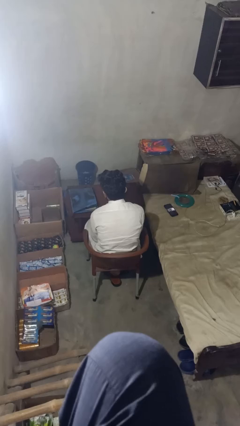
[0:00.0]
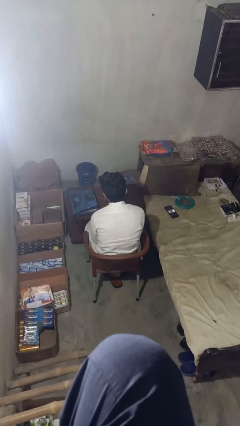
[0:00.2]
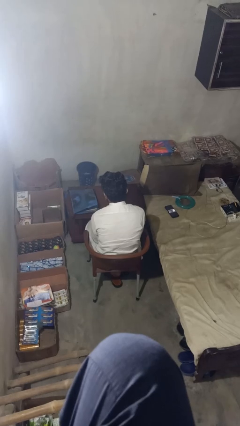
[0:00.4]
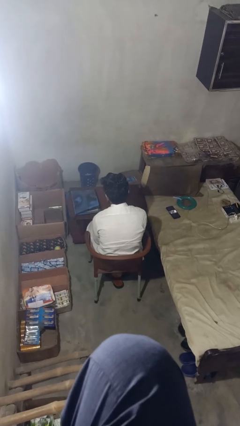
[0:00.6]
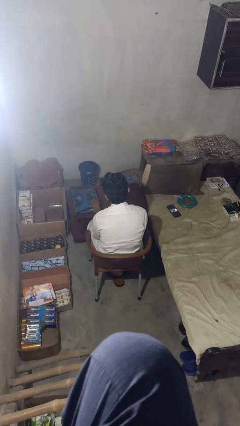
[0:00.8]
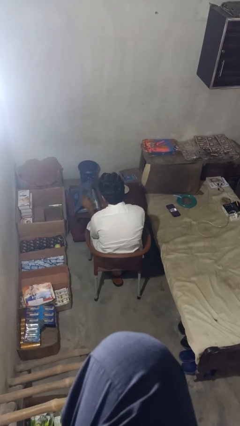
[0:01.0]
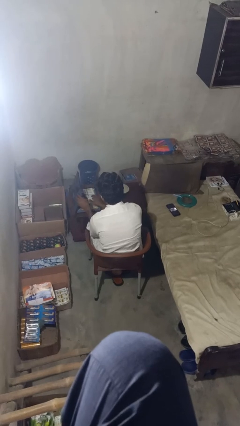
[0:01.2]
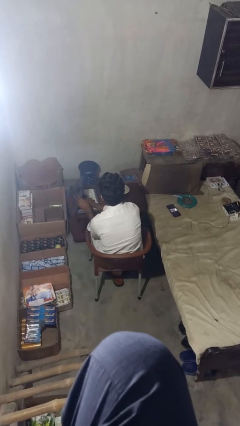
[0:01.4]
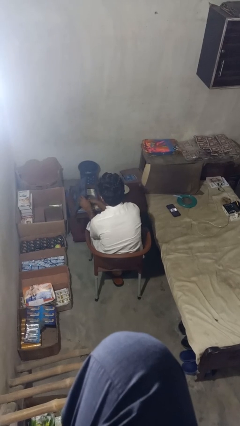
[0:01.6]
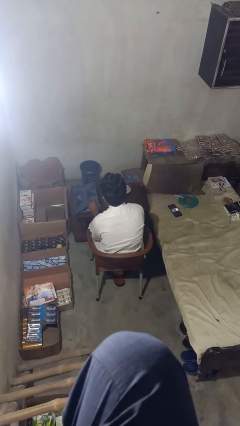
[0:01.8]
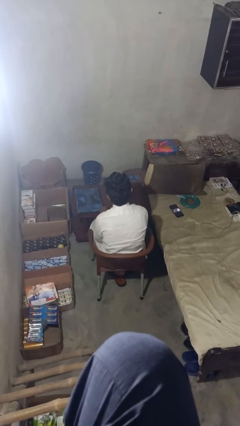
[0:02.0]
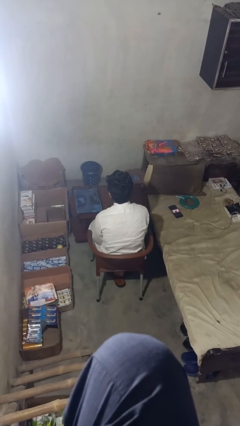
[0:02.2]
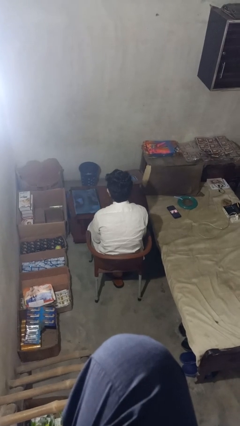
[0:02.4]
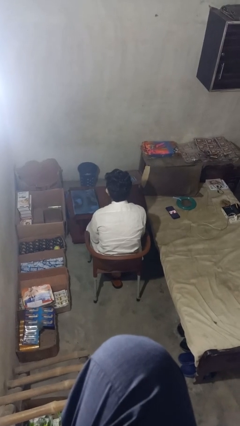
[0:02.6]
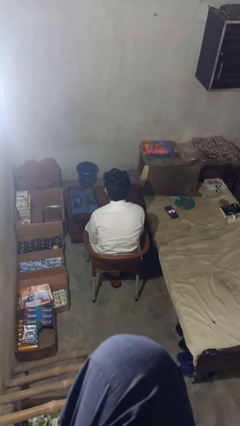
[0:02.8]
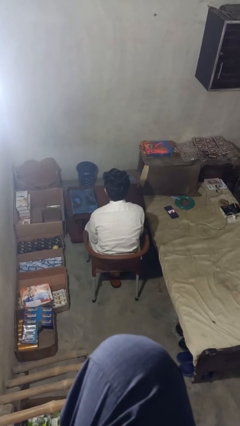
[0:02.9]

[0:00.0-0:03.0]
person puts object into bag

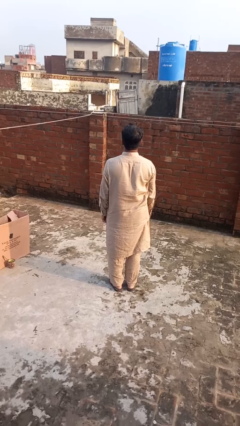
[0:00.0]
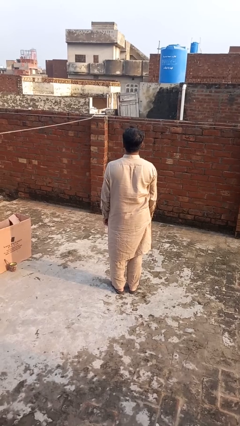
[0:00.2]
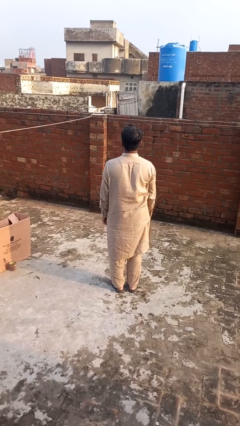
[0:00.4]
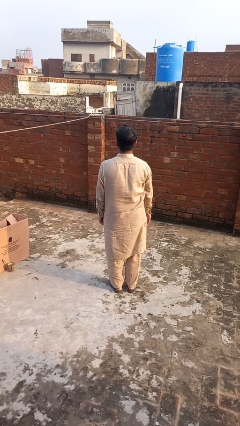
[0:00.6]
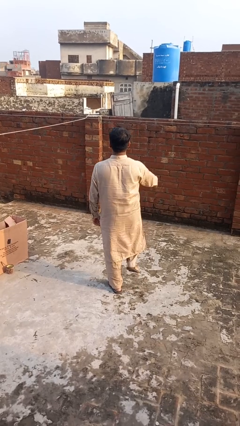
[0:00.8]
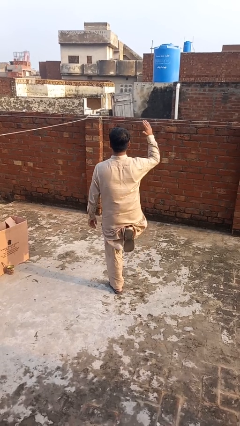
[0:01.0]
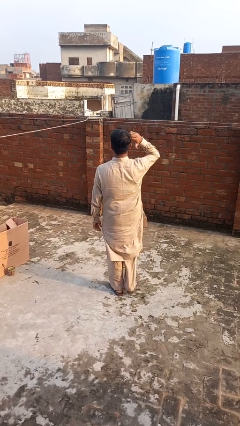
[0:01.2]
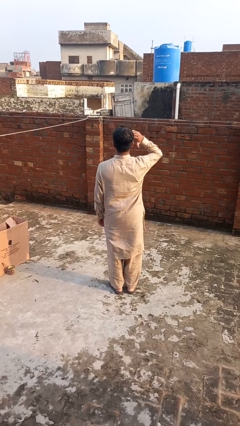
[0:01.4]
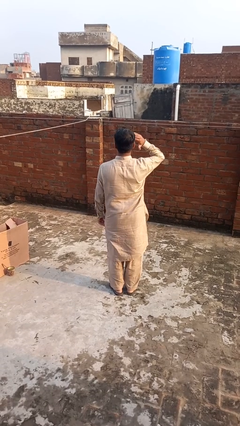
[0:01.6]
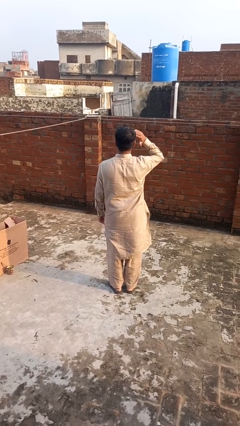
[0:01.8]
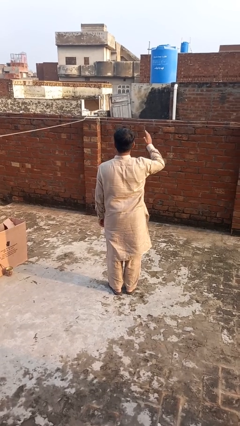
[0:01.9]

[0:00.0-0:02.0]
person salutes

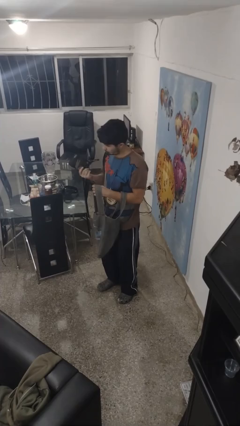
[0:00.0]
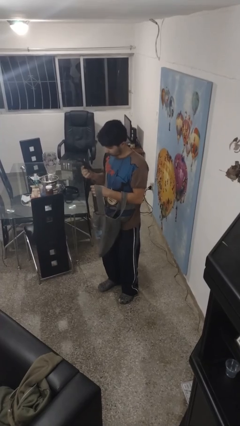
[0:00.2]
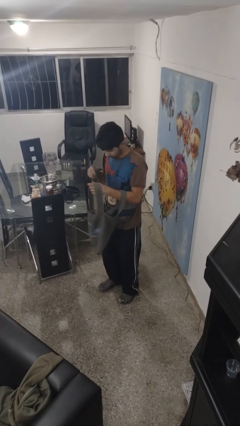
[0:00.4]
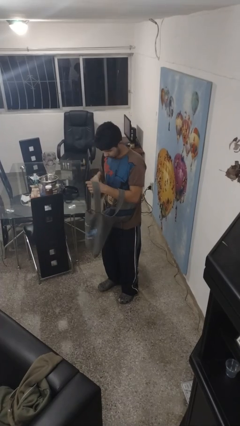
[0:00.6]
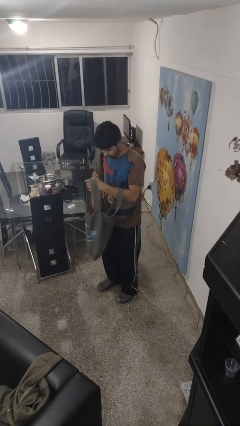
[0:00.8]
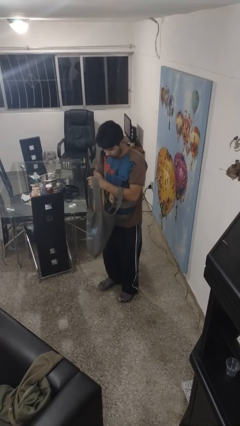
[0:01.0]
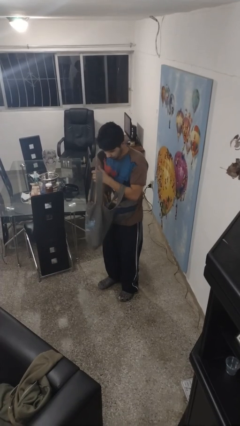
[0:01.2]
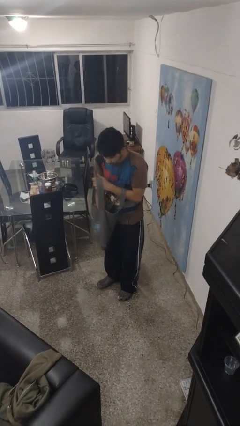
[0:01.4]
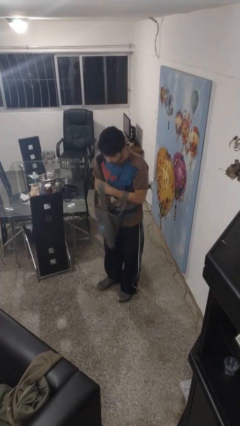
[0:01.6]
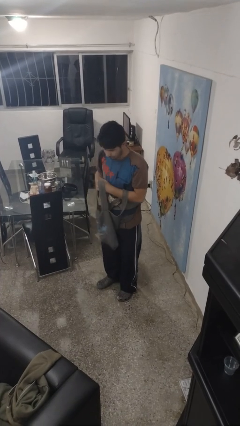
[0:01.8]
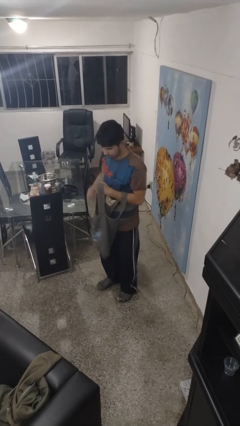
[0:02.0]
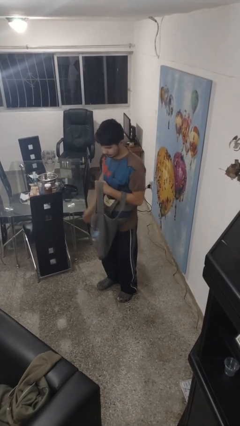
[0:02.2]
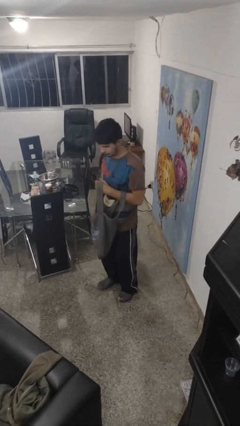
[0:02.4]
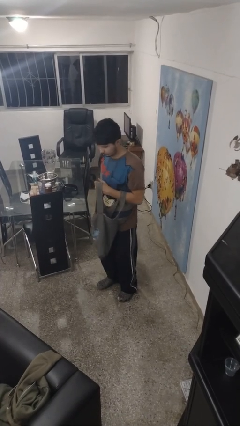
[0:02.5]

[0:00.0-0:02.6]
person puts object into purse

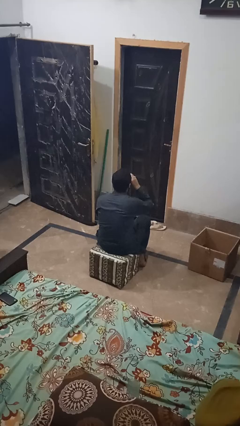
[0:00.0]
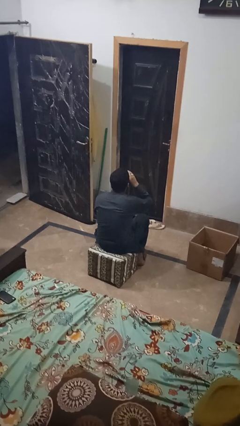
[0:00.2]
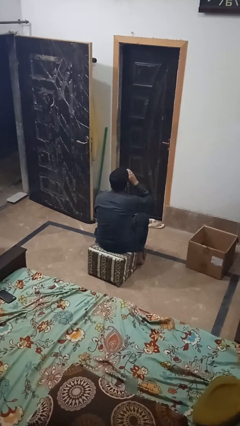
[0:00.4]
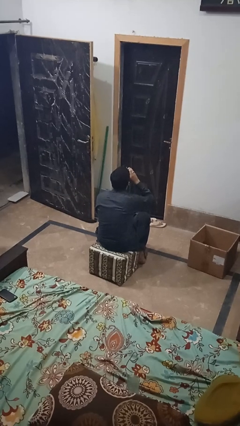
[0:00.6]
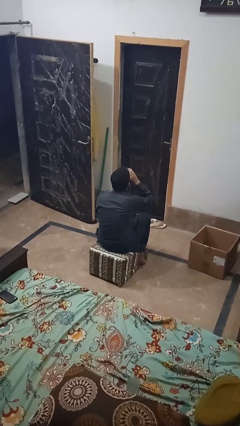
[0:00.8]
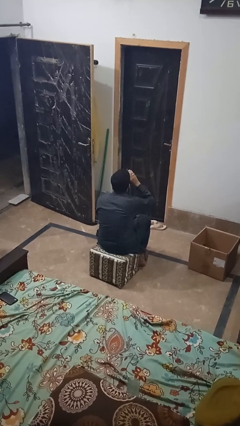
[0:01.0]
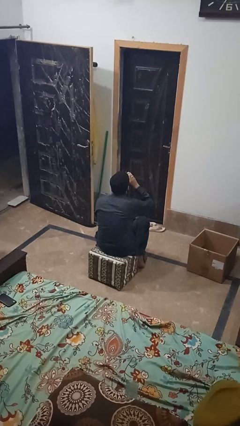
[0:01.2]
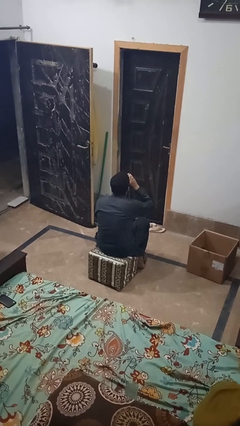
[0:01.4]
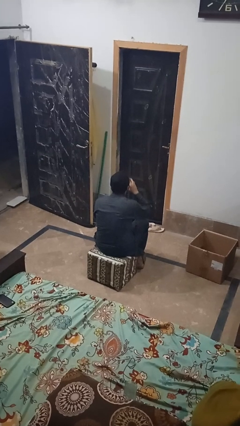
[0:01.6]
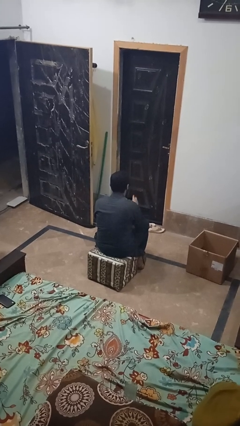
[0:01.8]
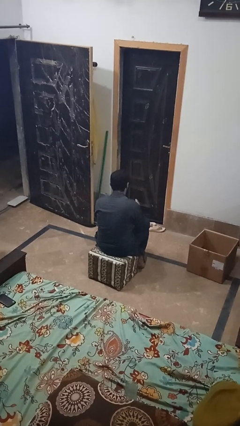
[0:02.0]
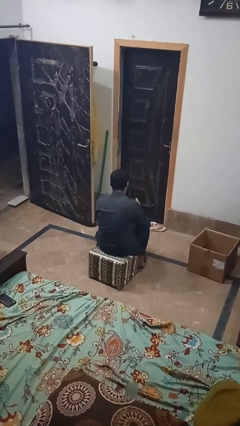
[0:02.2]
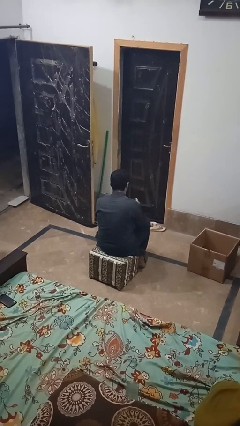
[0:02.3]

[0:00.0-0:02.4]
person drinks from mug

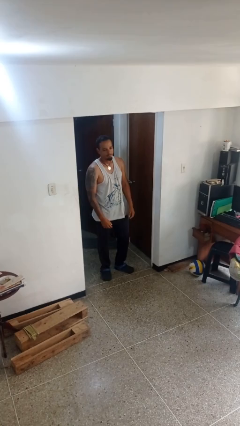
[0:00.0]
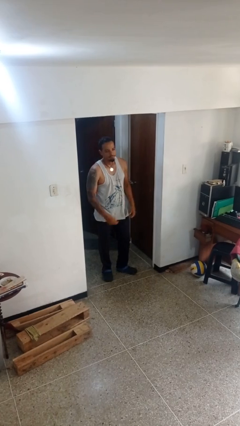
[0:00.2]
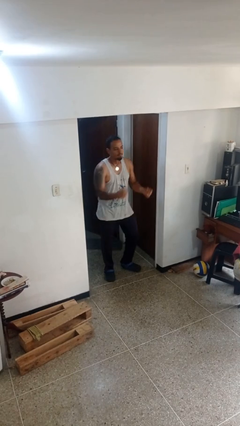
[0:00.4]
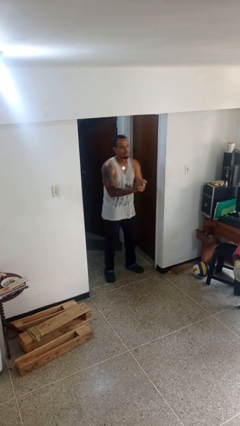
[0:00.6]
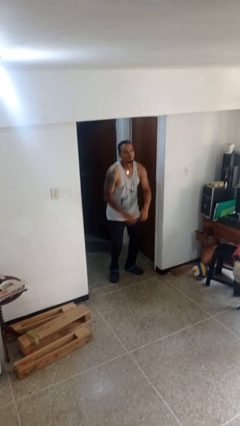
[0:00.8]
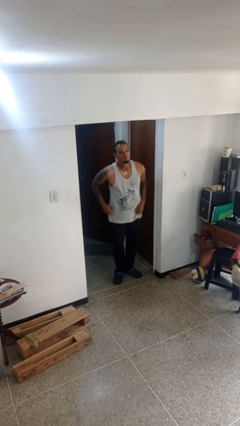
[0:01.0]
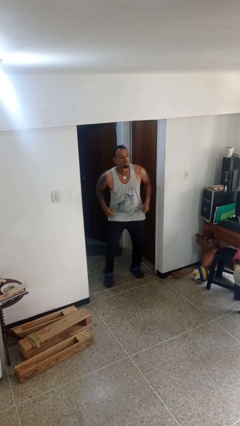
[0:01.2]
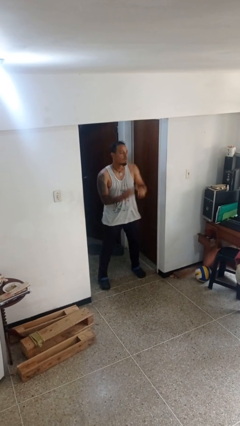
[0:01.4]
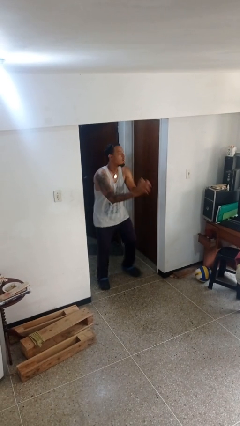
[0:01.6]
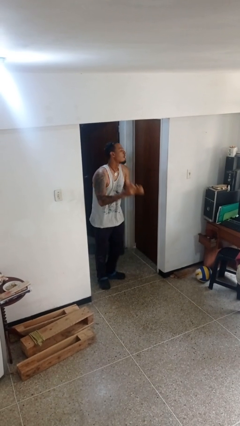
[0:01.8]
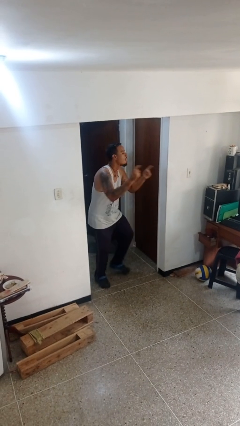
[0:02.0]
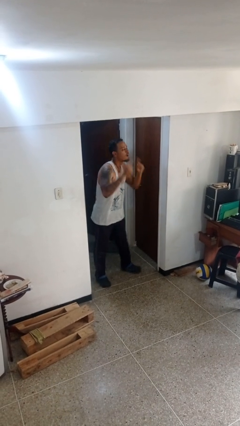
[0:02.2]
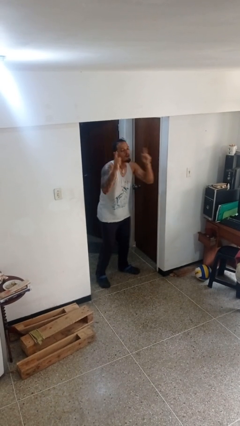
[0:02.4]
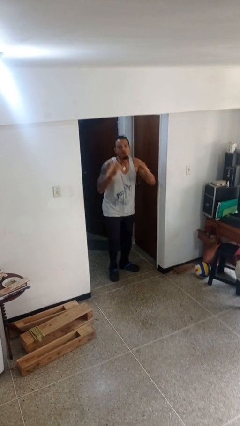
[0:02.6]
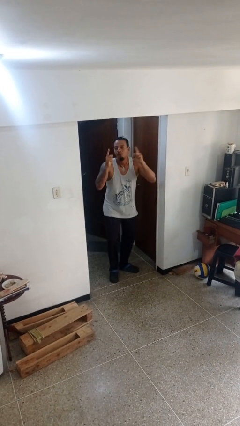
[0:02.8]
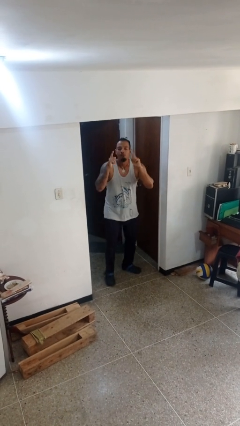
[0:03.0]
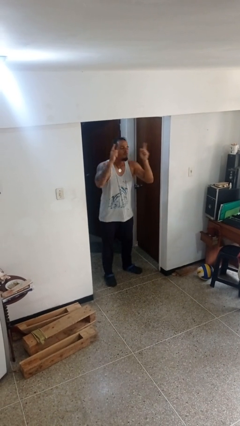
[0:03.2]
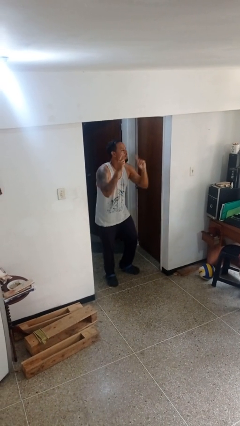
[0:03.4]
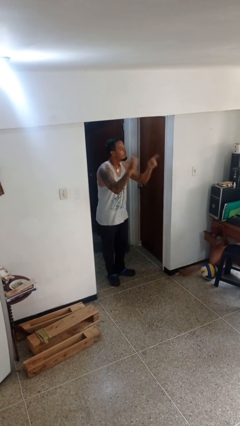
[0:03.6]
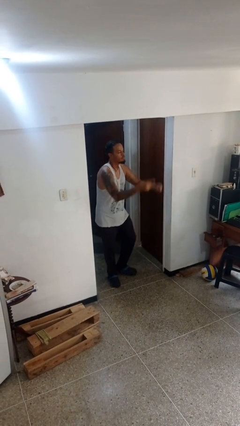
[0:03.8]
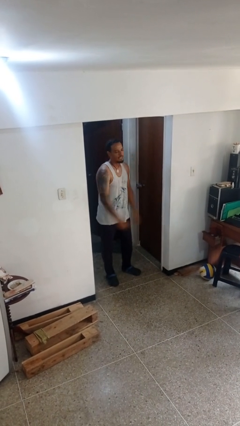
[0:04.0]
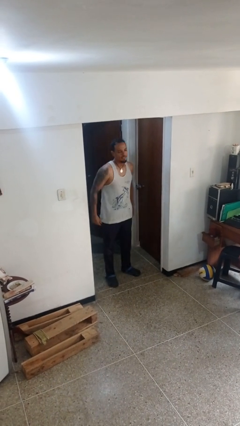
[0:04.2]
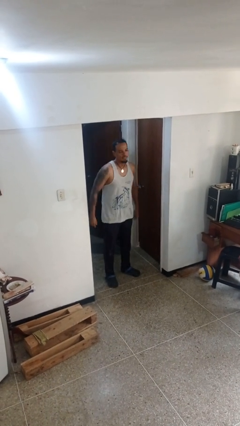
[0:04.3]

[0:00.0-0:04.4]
person dances in place

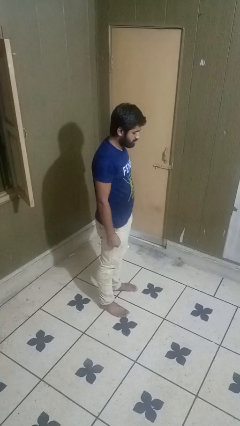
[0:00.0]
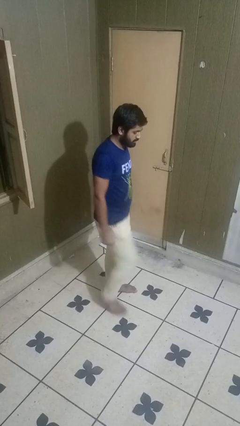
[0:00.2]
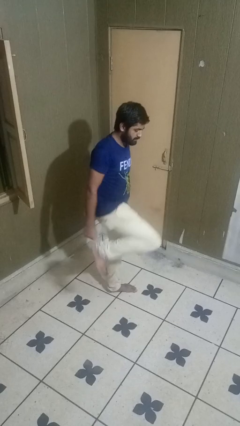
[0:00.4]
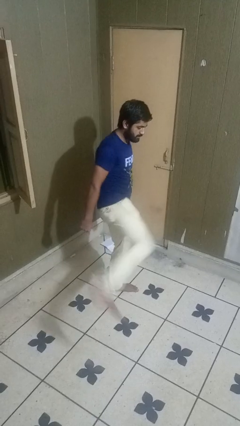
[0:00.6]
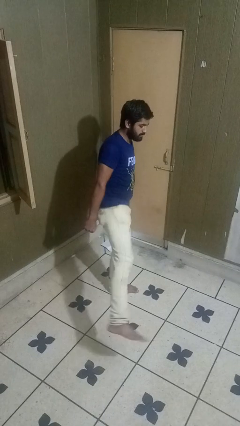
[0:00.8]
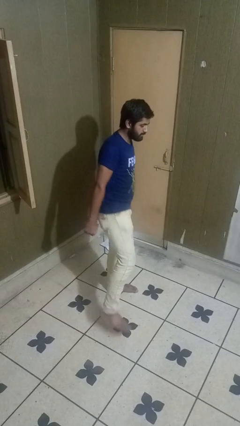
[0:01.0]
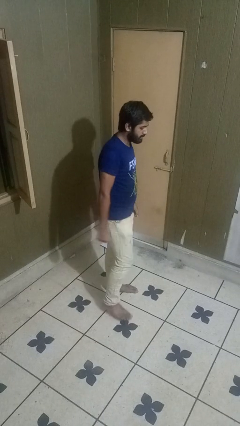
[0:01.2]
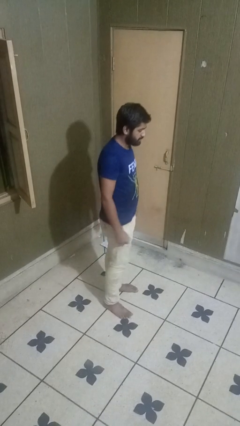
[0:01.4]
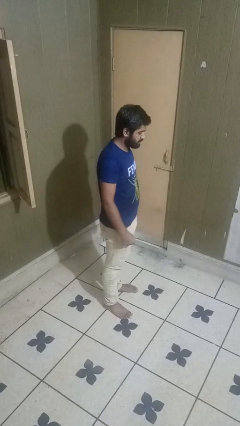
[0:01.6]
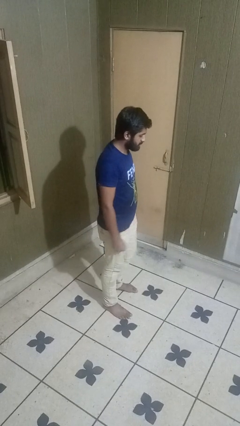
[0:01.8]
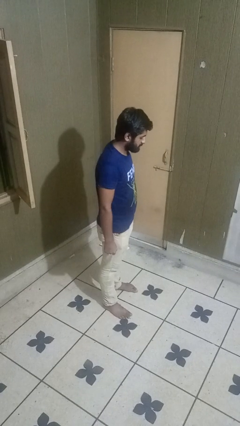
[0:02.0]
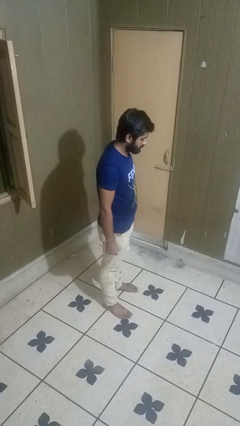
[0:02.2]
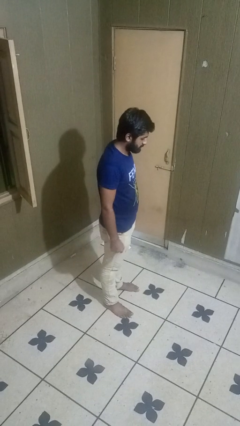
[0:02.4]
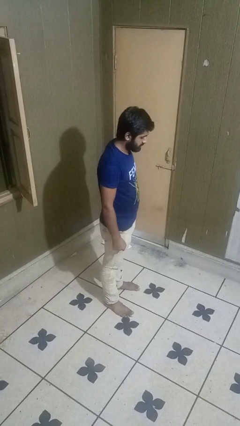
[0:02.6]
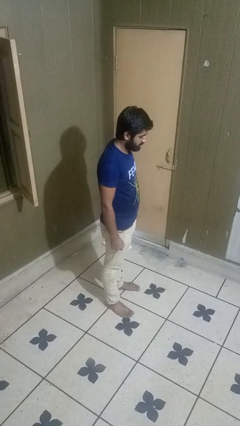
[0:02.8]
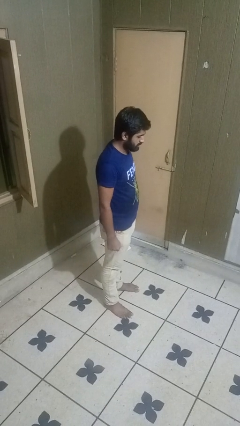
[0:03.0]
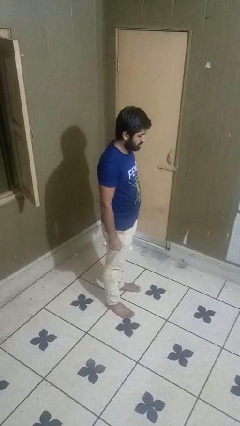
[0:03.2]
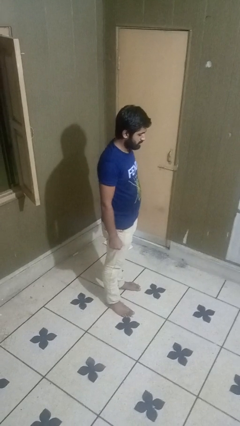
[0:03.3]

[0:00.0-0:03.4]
person karate kicks
